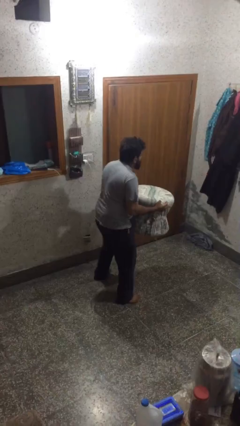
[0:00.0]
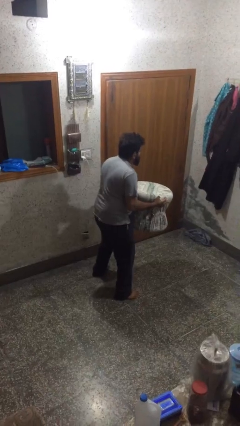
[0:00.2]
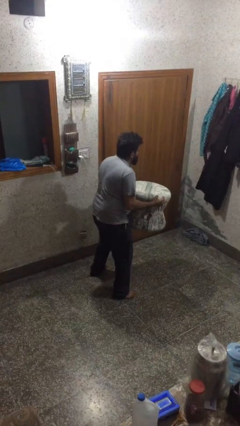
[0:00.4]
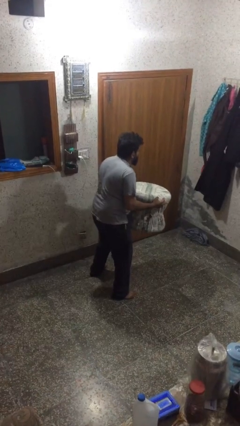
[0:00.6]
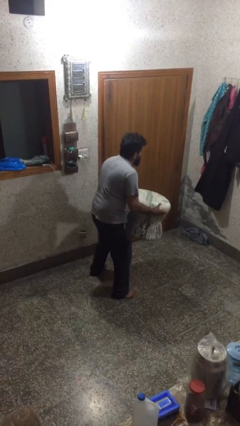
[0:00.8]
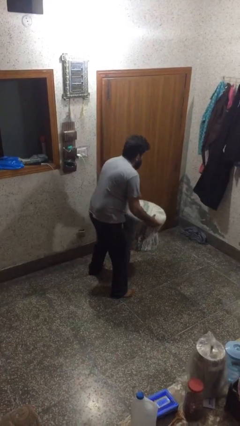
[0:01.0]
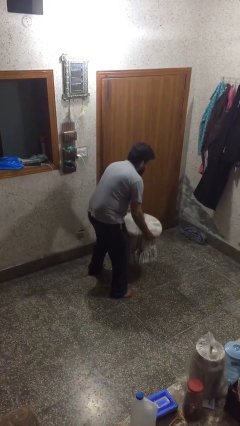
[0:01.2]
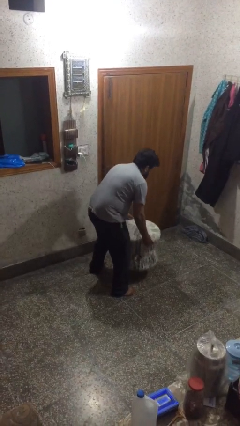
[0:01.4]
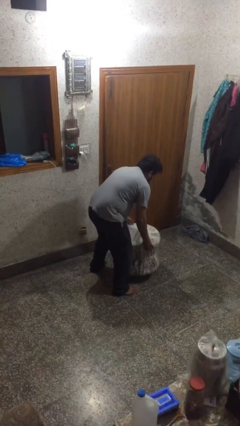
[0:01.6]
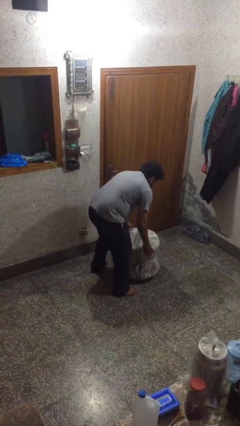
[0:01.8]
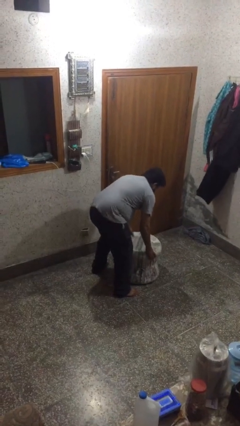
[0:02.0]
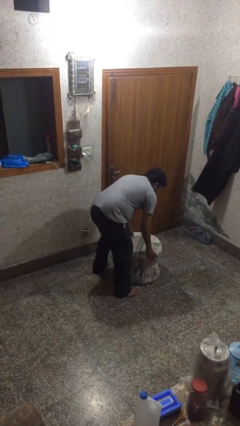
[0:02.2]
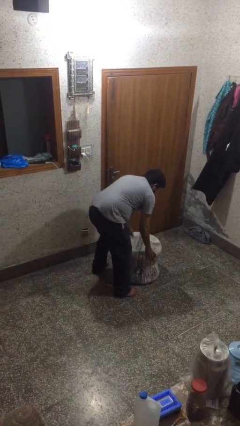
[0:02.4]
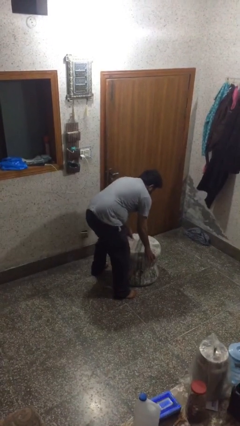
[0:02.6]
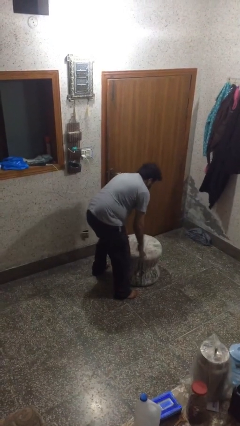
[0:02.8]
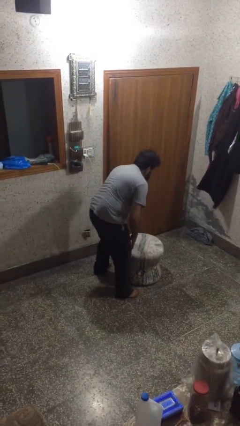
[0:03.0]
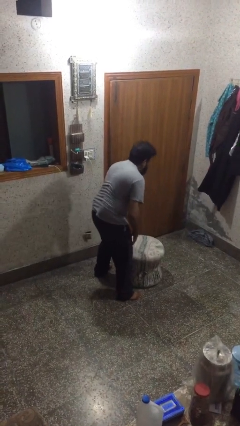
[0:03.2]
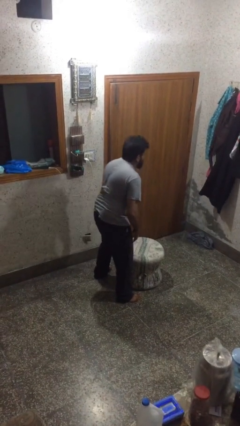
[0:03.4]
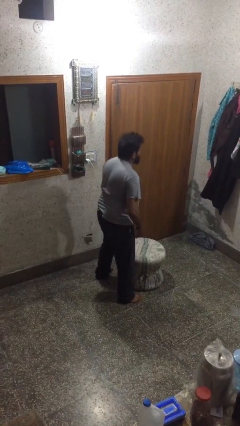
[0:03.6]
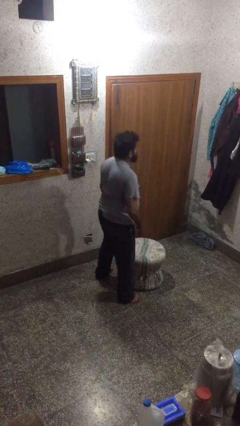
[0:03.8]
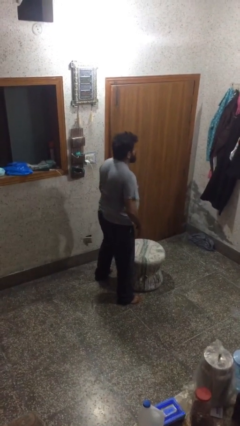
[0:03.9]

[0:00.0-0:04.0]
person puts down object on floor

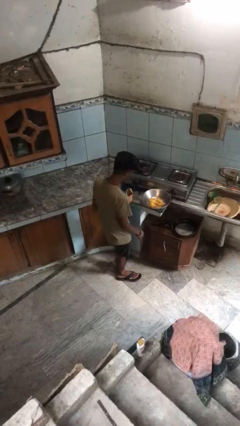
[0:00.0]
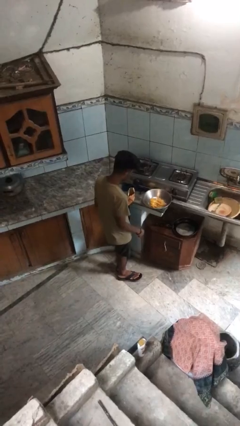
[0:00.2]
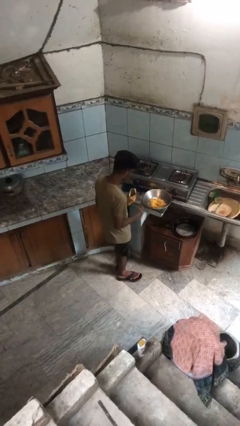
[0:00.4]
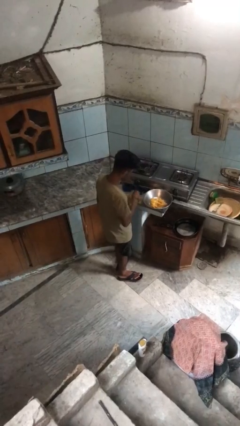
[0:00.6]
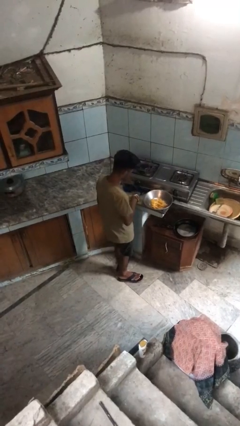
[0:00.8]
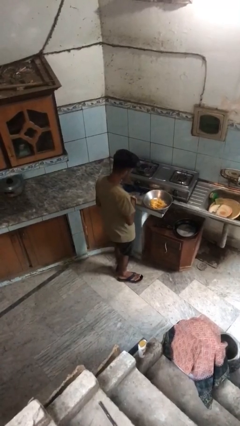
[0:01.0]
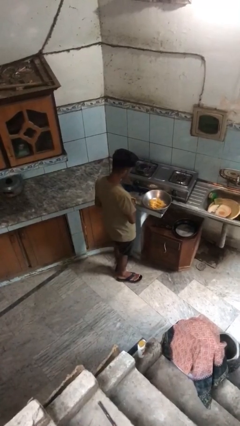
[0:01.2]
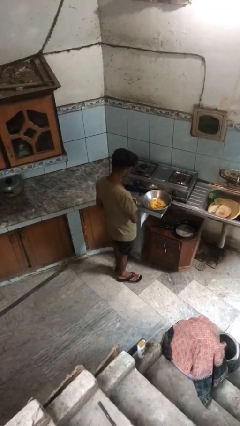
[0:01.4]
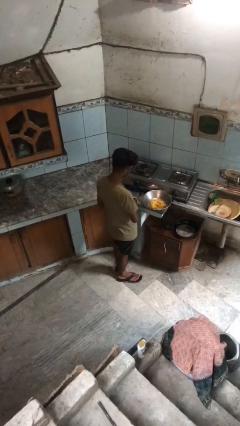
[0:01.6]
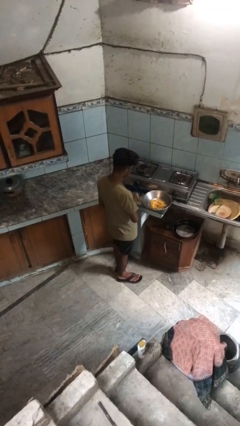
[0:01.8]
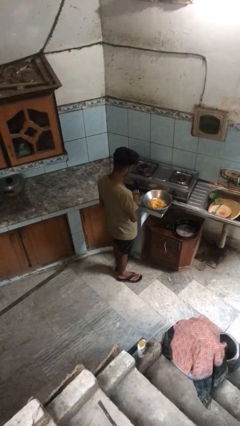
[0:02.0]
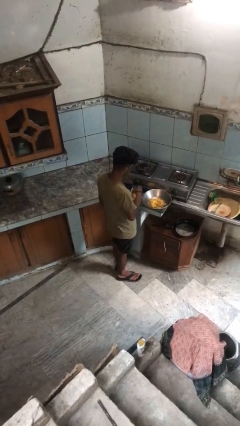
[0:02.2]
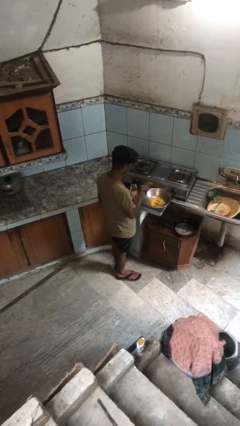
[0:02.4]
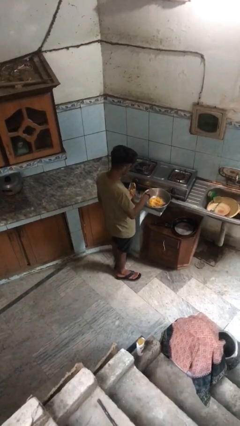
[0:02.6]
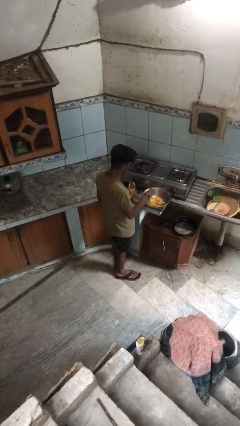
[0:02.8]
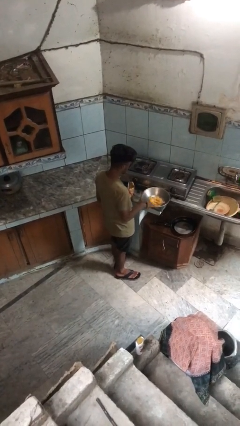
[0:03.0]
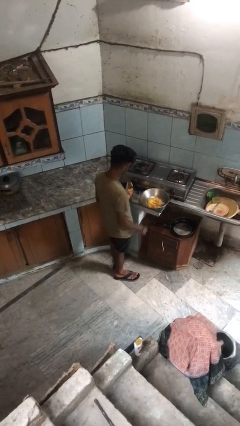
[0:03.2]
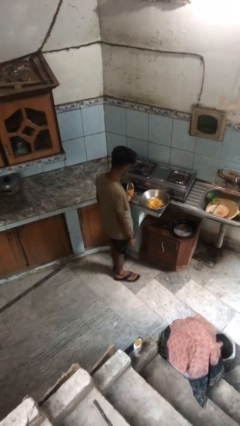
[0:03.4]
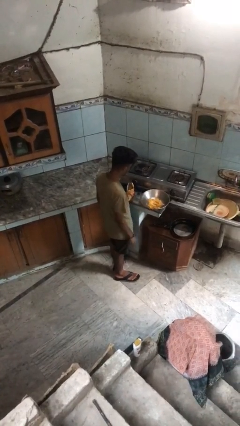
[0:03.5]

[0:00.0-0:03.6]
person pours into bowl

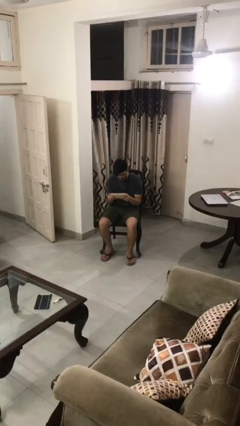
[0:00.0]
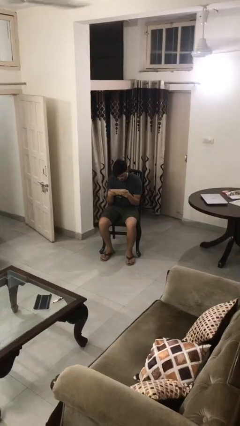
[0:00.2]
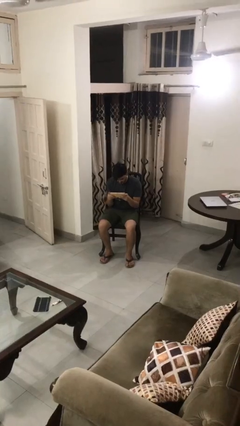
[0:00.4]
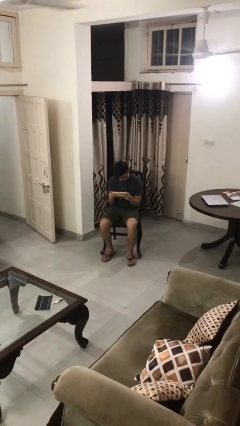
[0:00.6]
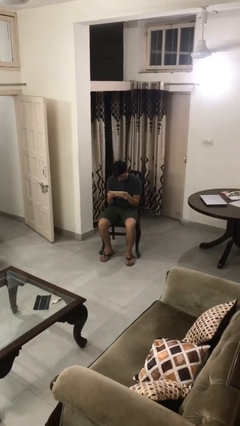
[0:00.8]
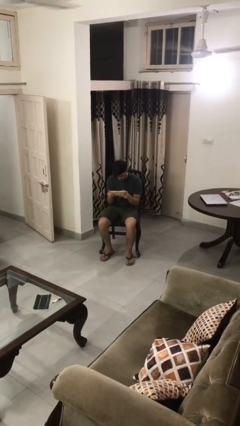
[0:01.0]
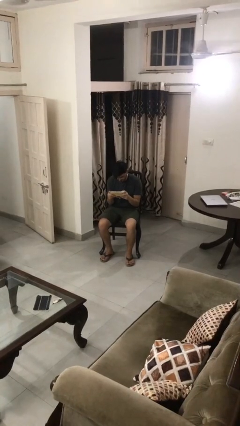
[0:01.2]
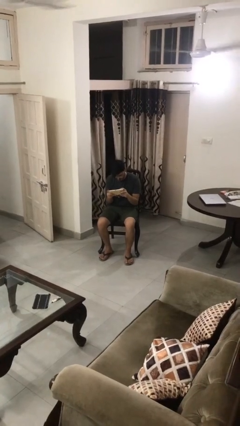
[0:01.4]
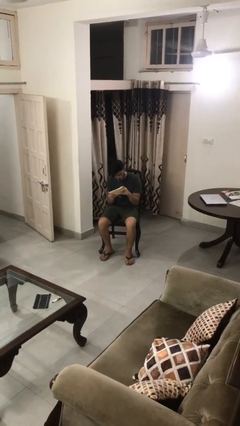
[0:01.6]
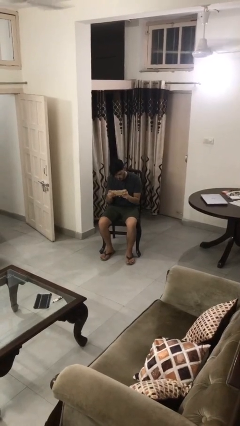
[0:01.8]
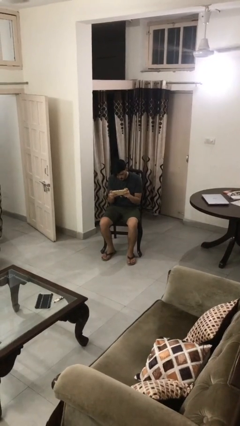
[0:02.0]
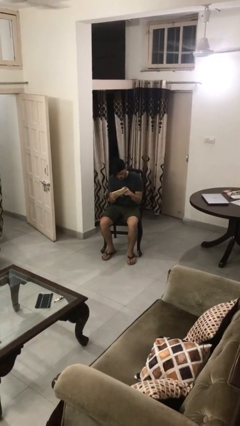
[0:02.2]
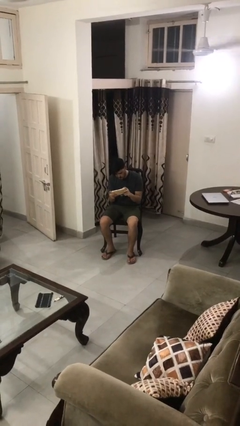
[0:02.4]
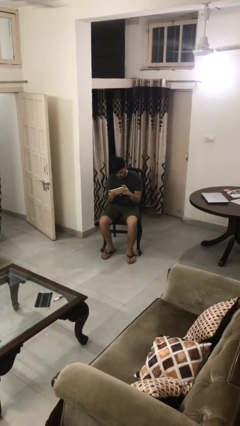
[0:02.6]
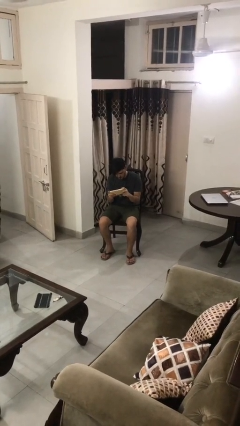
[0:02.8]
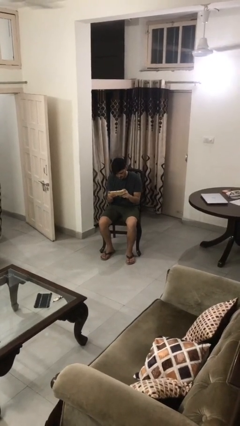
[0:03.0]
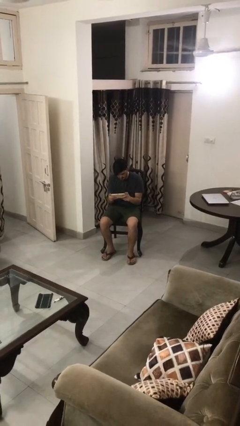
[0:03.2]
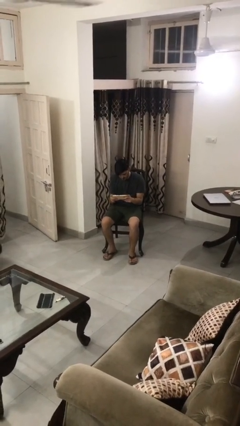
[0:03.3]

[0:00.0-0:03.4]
person interacts with handheld game

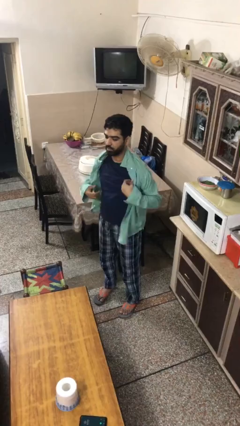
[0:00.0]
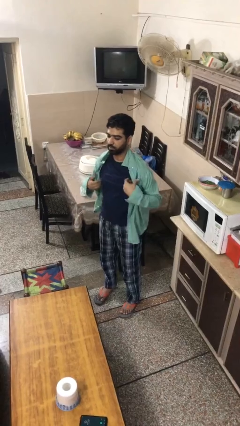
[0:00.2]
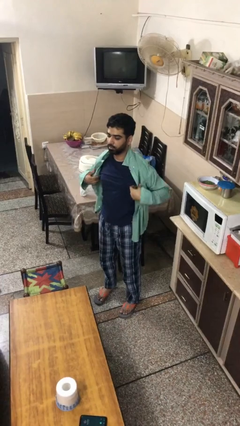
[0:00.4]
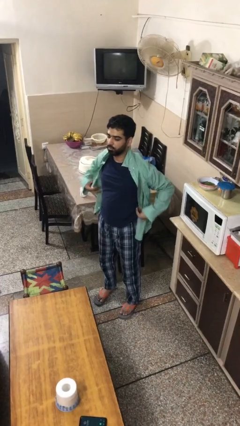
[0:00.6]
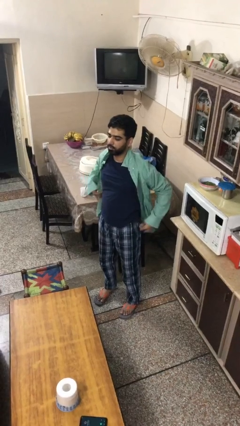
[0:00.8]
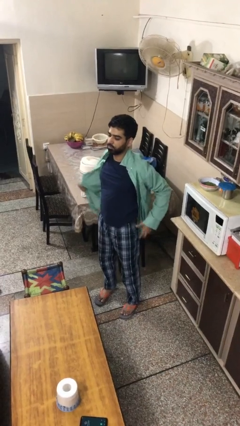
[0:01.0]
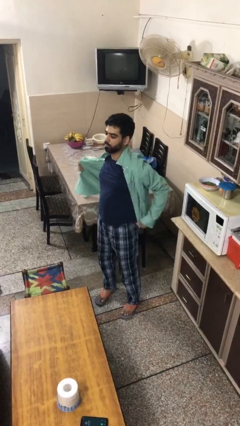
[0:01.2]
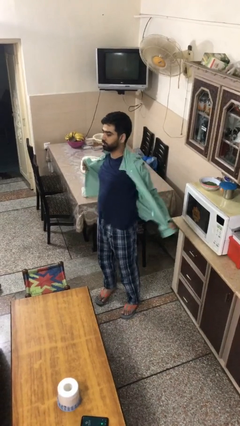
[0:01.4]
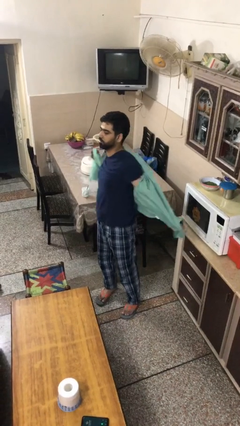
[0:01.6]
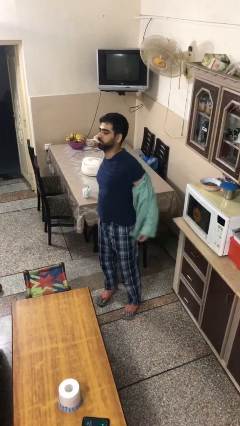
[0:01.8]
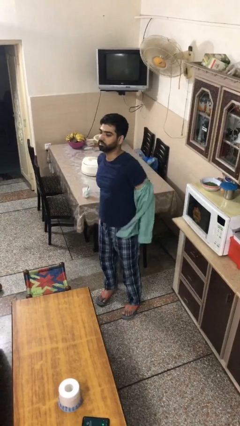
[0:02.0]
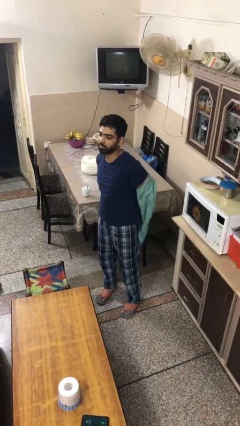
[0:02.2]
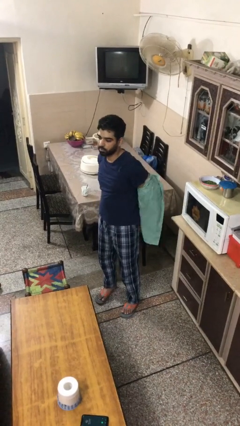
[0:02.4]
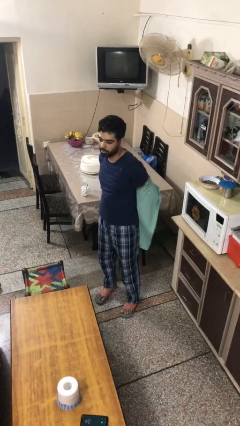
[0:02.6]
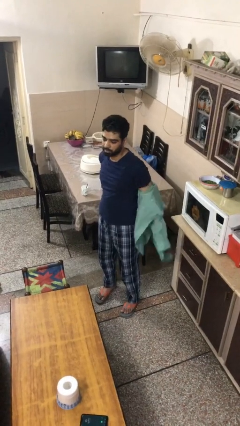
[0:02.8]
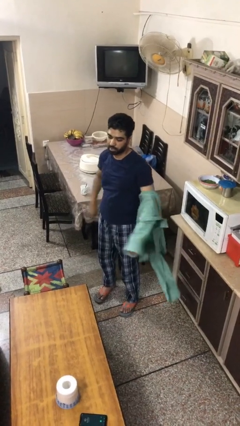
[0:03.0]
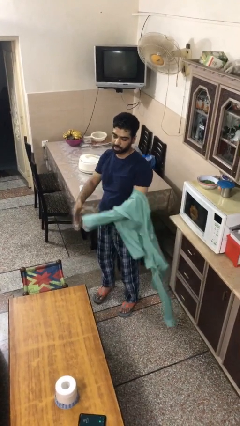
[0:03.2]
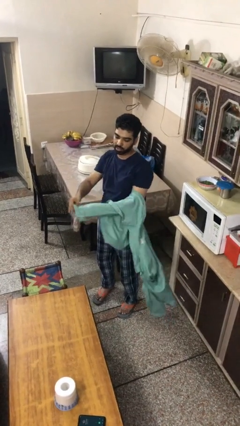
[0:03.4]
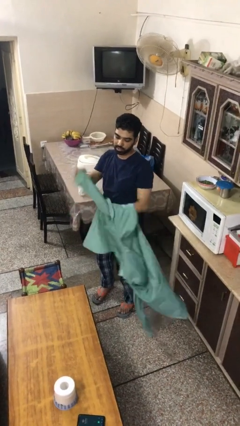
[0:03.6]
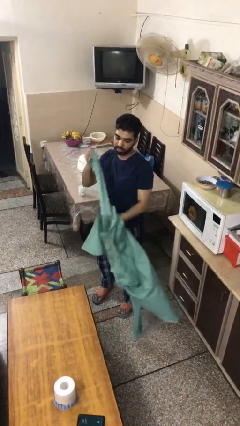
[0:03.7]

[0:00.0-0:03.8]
person takes off shirt

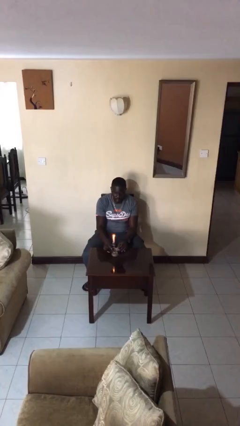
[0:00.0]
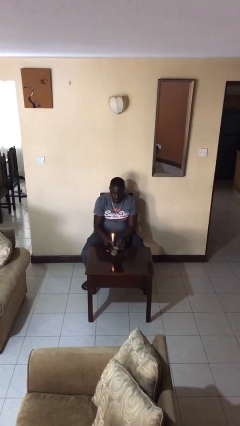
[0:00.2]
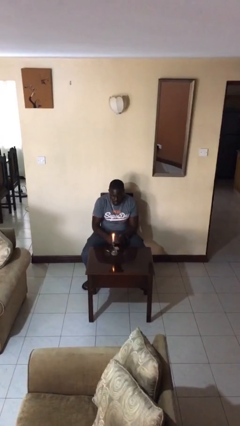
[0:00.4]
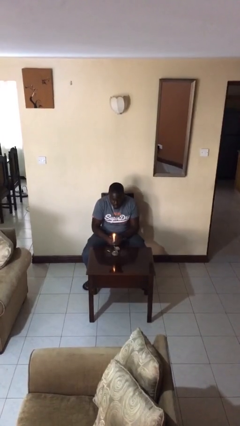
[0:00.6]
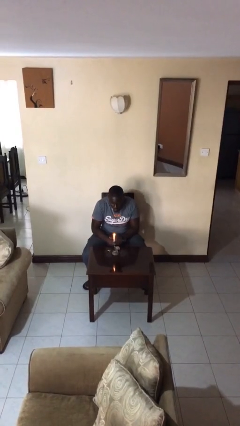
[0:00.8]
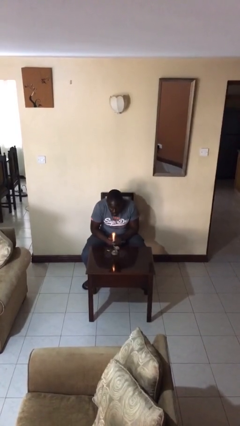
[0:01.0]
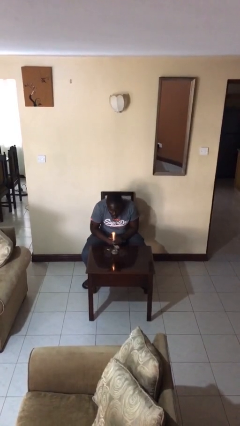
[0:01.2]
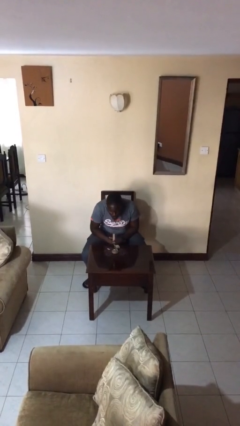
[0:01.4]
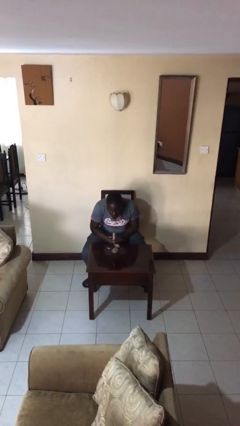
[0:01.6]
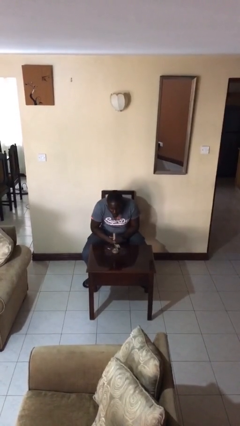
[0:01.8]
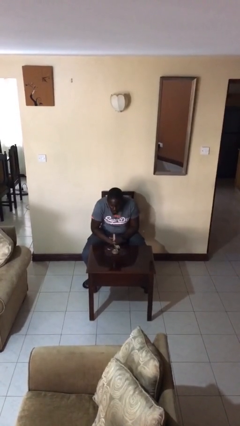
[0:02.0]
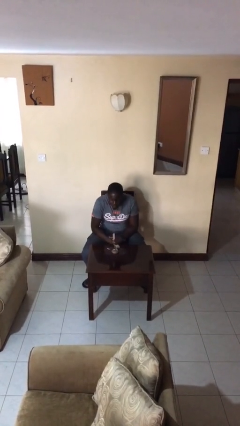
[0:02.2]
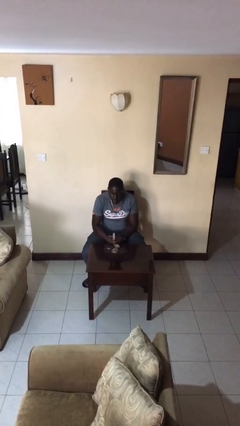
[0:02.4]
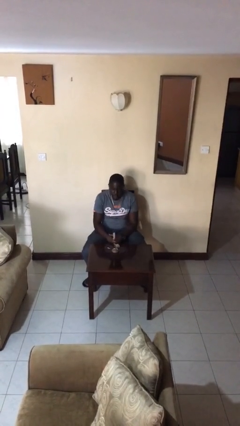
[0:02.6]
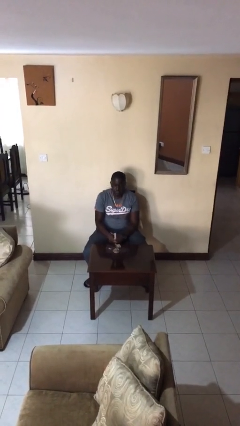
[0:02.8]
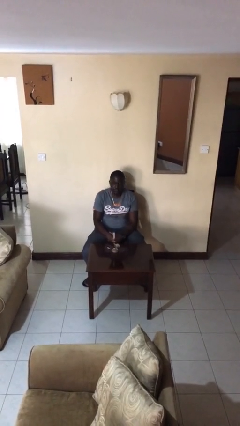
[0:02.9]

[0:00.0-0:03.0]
person extinguishes candle
